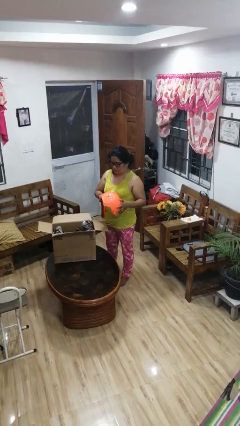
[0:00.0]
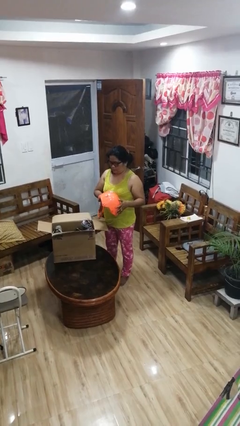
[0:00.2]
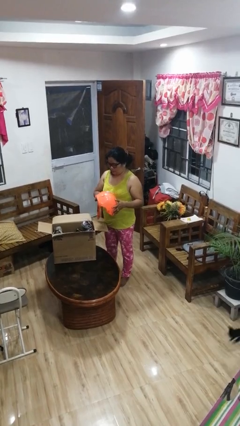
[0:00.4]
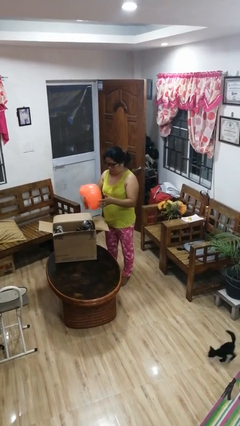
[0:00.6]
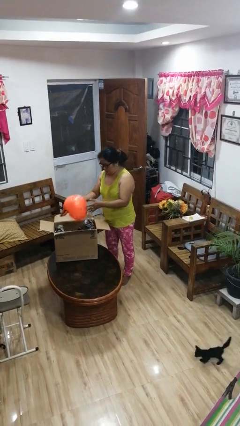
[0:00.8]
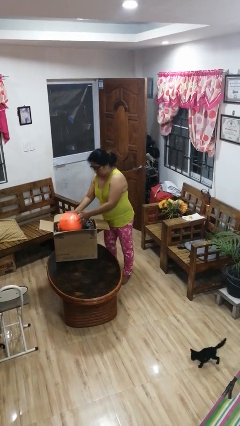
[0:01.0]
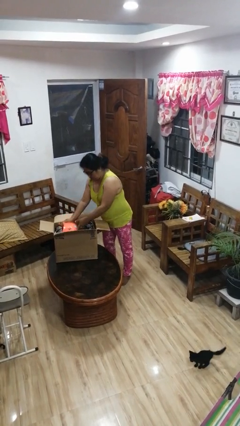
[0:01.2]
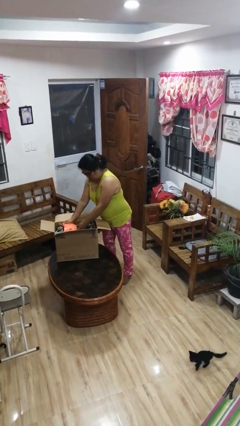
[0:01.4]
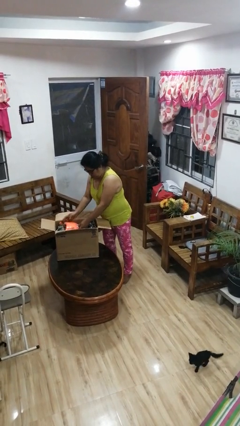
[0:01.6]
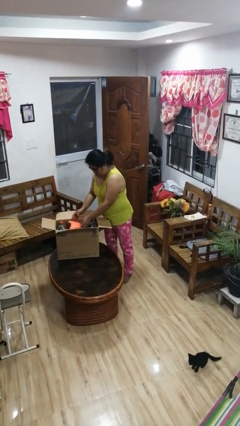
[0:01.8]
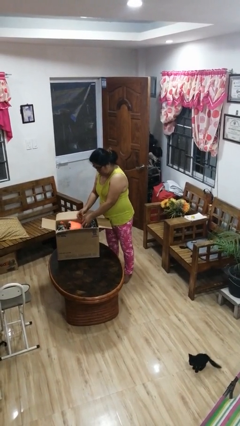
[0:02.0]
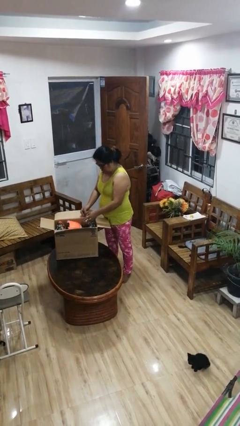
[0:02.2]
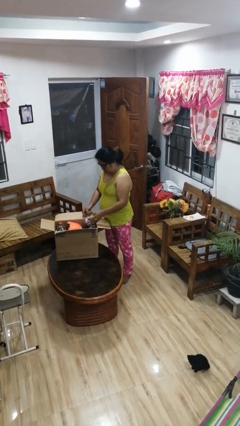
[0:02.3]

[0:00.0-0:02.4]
person puts object into box

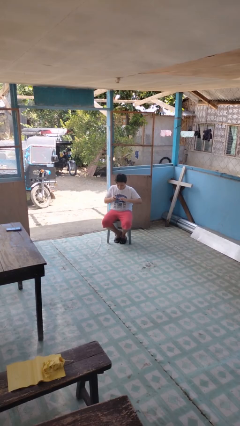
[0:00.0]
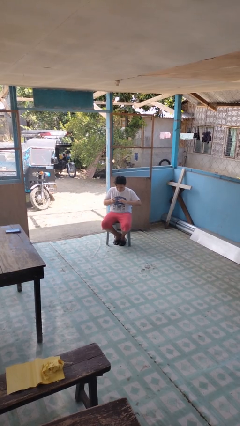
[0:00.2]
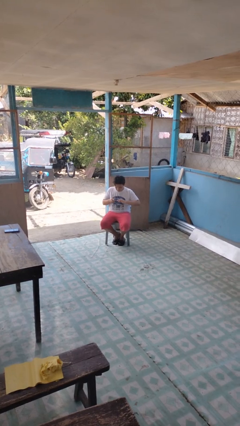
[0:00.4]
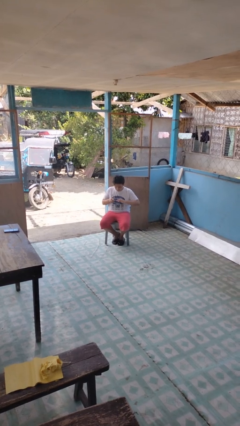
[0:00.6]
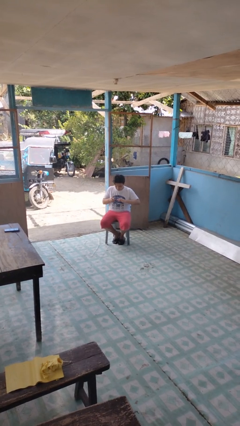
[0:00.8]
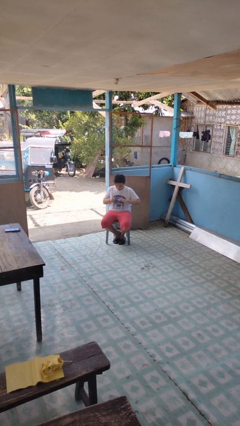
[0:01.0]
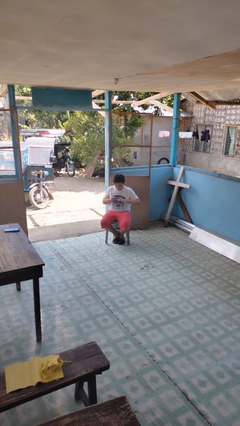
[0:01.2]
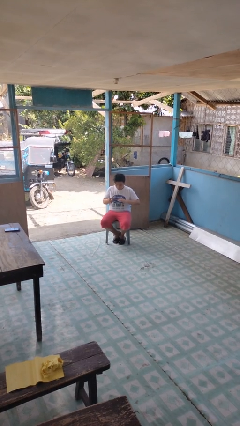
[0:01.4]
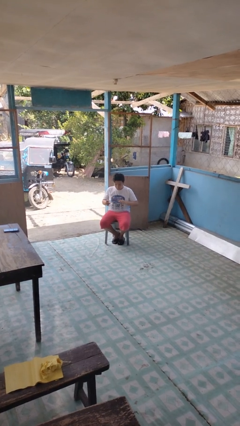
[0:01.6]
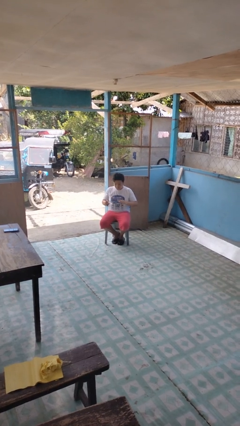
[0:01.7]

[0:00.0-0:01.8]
person clips fingernails

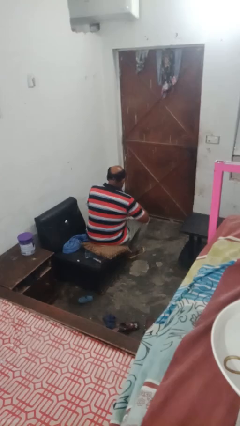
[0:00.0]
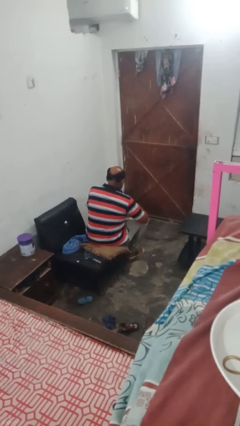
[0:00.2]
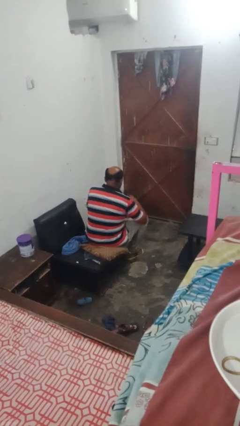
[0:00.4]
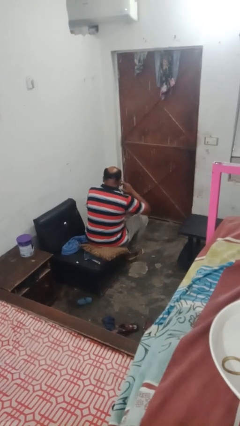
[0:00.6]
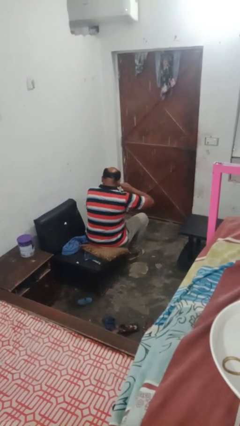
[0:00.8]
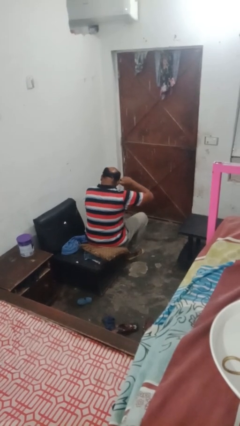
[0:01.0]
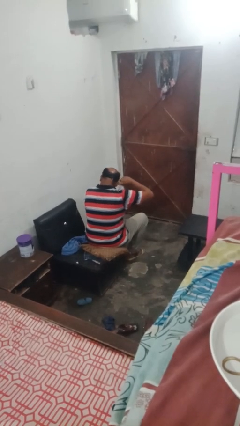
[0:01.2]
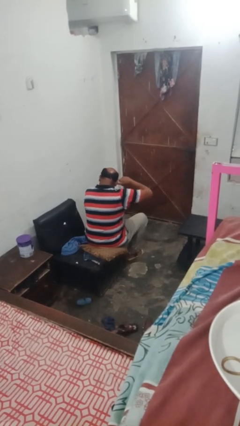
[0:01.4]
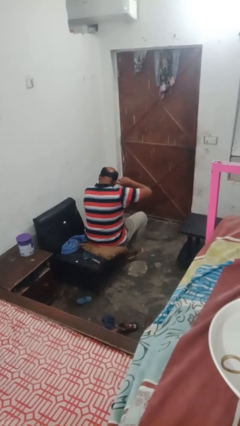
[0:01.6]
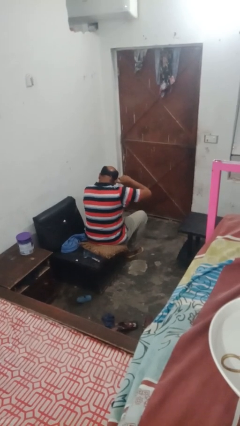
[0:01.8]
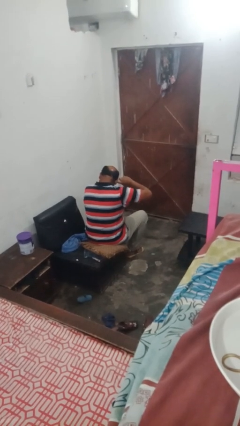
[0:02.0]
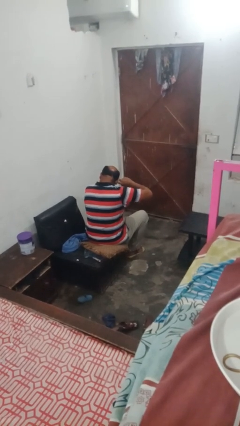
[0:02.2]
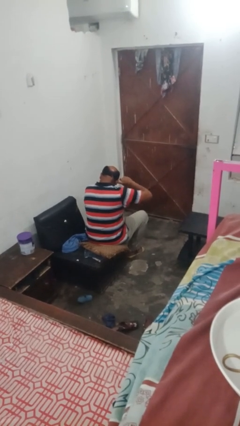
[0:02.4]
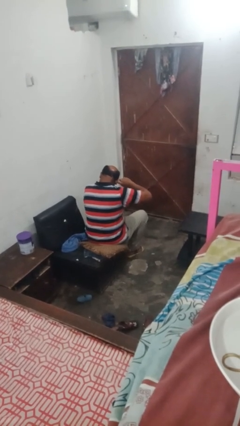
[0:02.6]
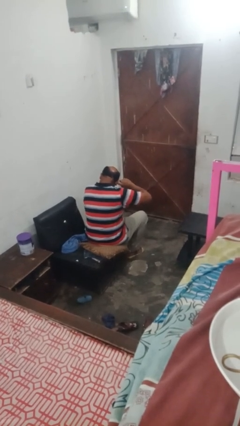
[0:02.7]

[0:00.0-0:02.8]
person puts fingers in ear

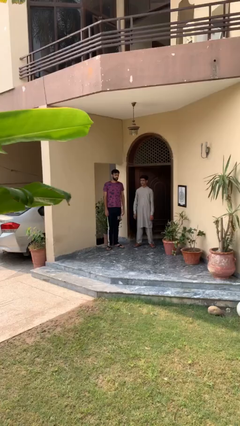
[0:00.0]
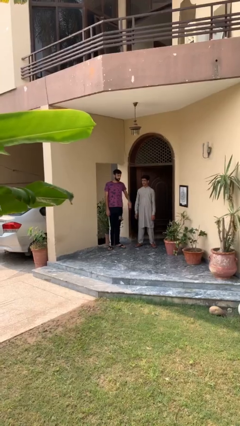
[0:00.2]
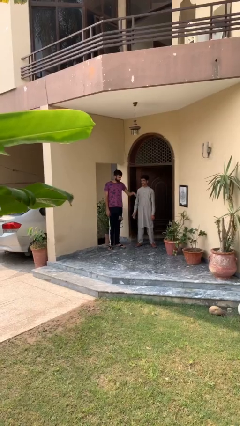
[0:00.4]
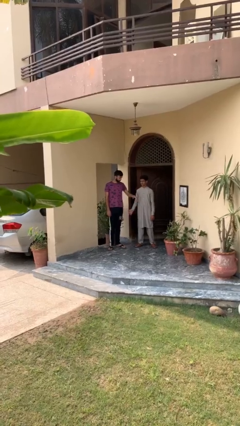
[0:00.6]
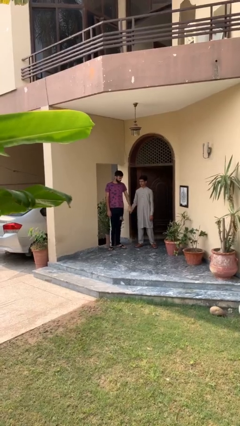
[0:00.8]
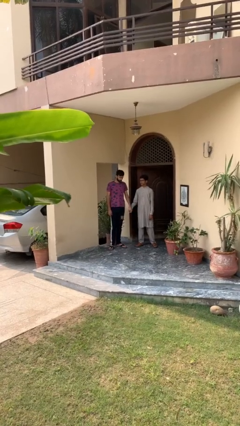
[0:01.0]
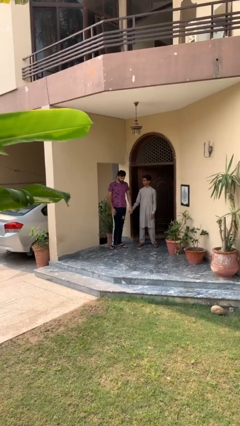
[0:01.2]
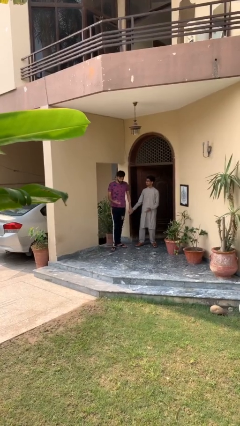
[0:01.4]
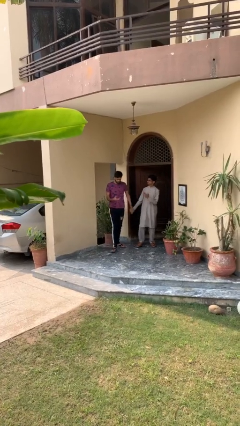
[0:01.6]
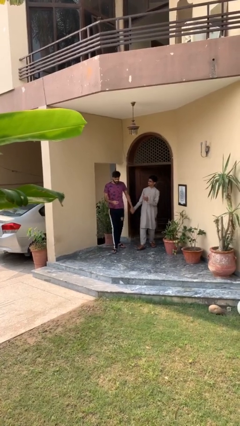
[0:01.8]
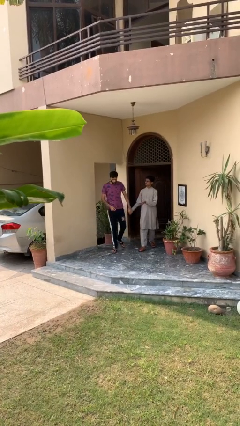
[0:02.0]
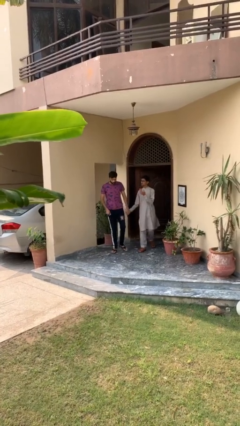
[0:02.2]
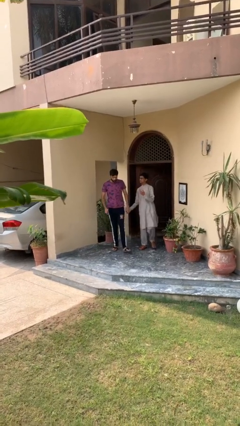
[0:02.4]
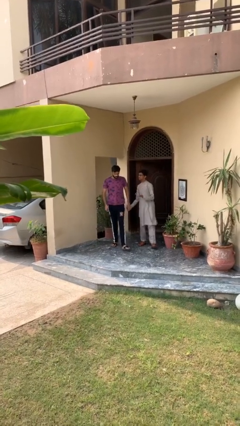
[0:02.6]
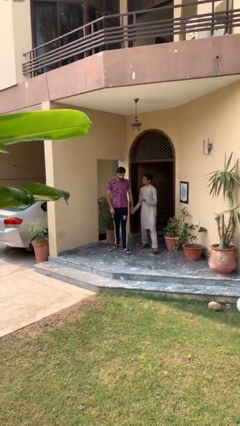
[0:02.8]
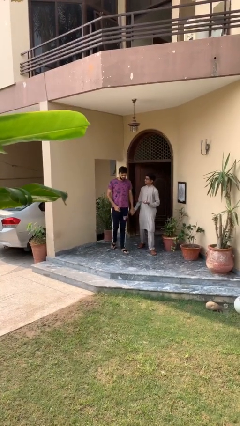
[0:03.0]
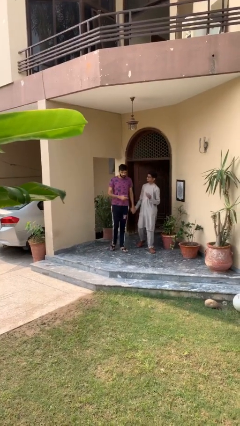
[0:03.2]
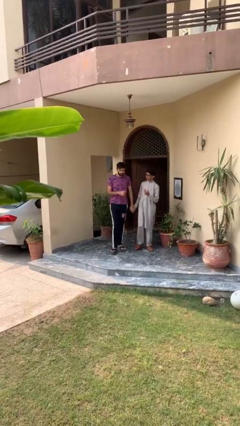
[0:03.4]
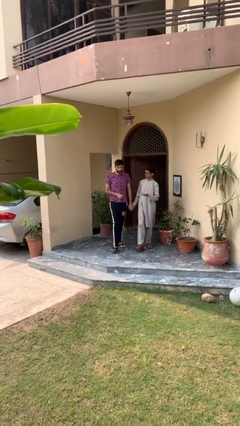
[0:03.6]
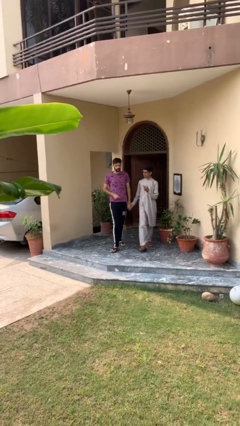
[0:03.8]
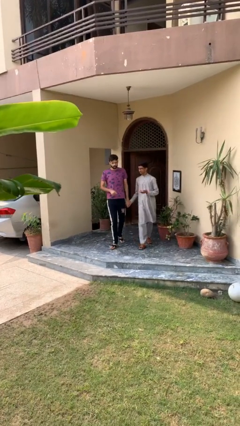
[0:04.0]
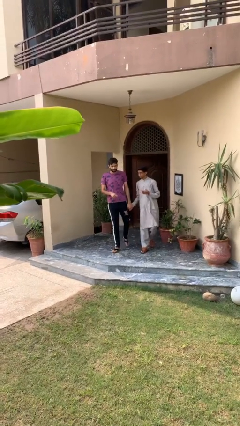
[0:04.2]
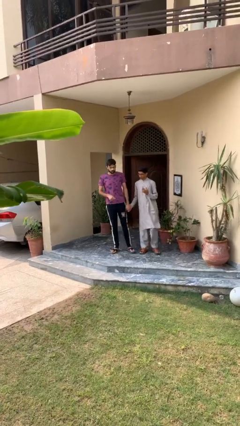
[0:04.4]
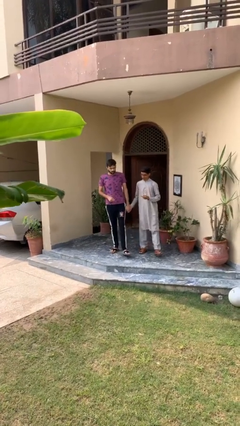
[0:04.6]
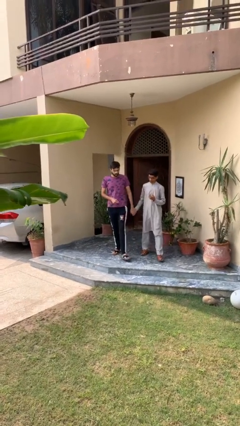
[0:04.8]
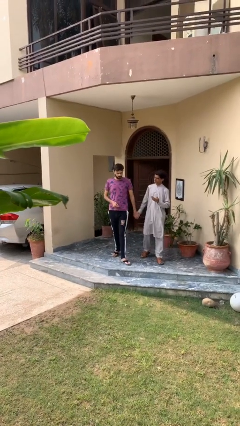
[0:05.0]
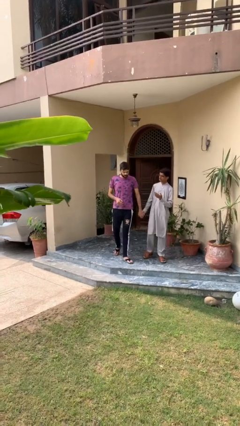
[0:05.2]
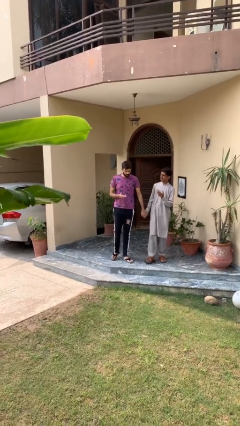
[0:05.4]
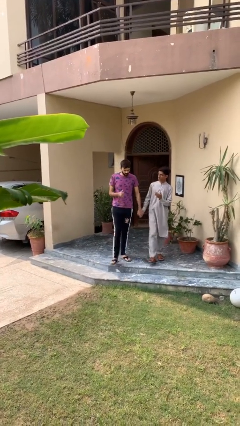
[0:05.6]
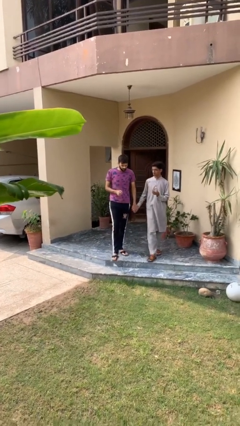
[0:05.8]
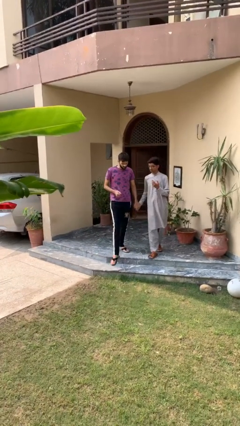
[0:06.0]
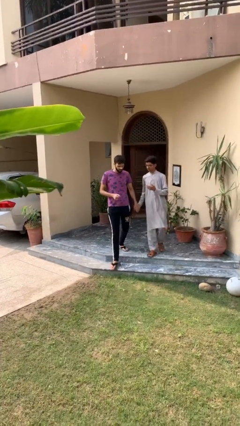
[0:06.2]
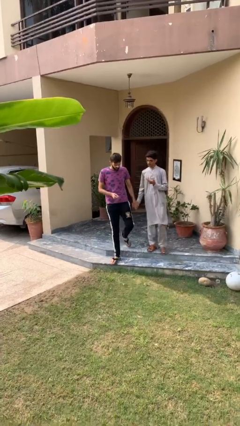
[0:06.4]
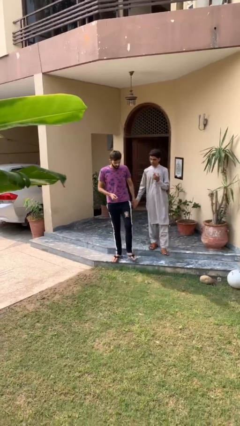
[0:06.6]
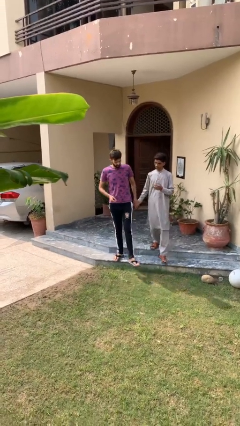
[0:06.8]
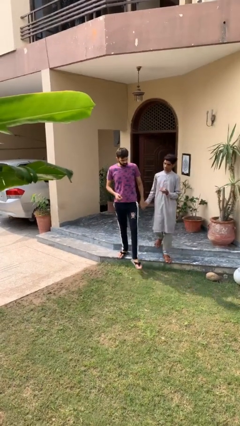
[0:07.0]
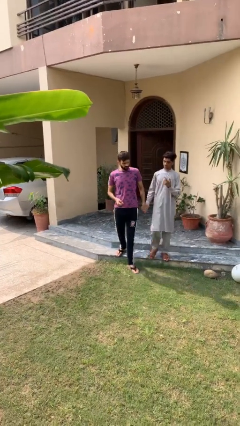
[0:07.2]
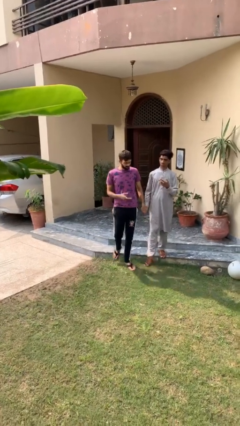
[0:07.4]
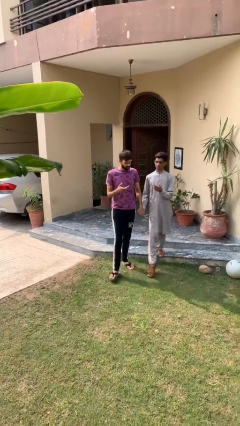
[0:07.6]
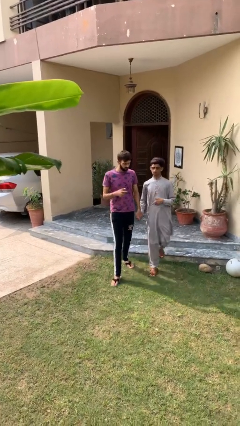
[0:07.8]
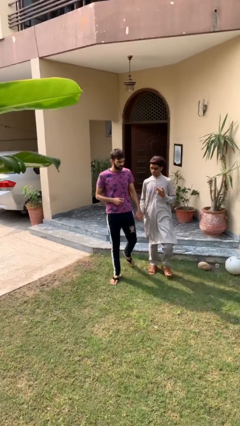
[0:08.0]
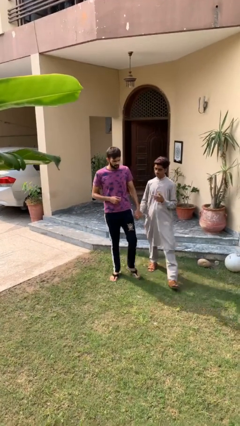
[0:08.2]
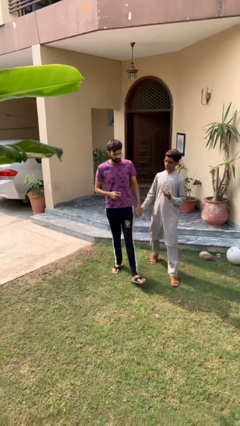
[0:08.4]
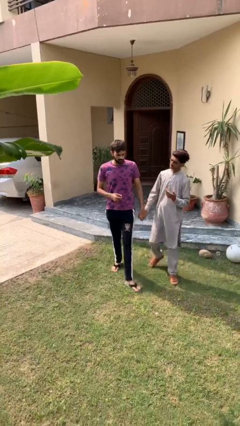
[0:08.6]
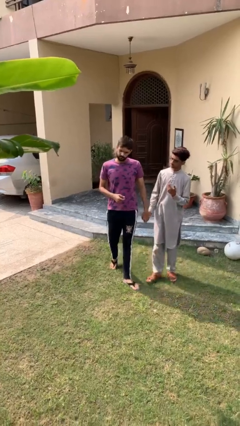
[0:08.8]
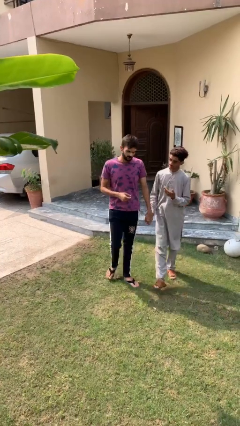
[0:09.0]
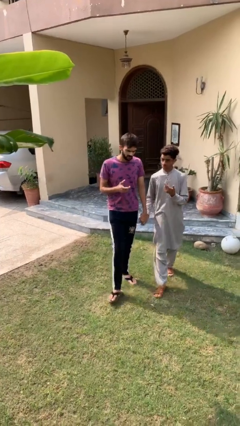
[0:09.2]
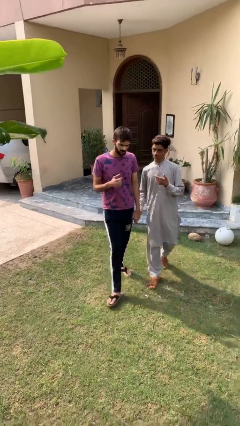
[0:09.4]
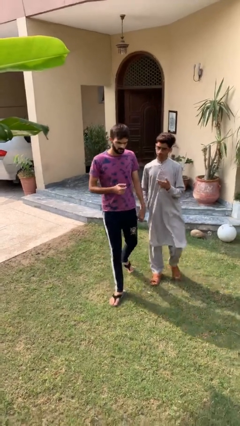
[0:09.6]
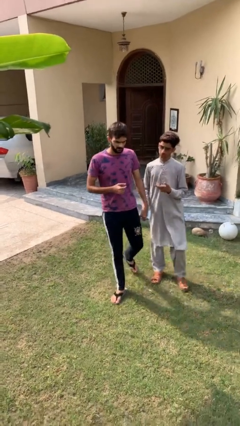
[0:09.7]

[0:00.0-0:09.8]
person holds hand

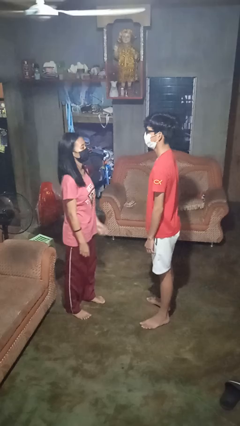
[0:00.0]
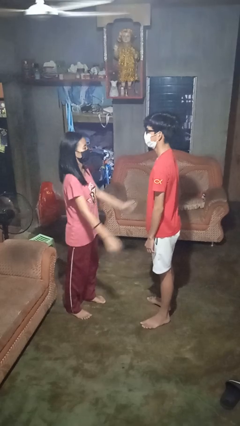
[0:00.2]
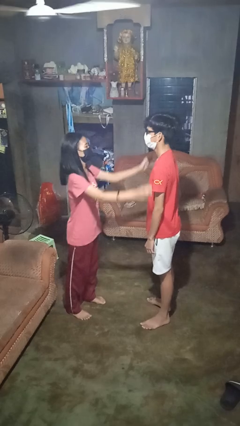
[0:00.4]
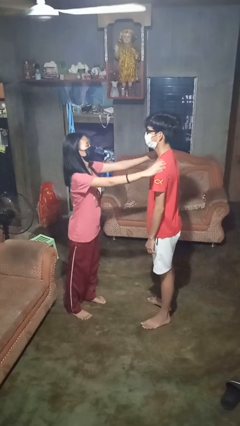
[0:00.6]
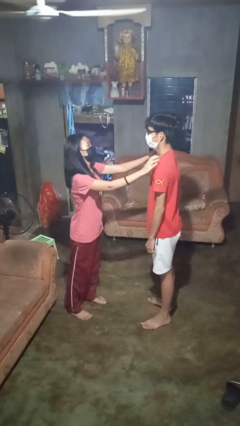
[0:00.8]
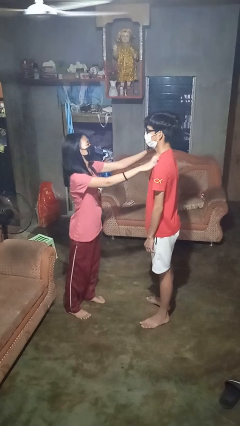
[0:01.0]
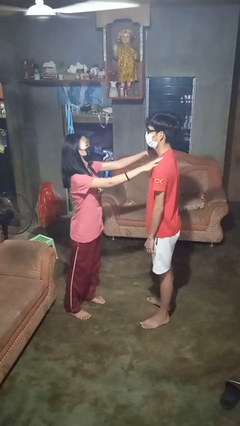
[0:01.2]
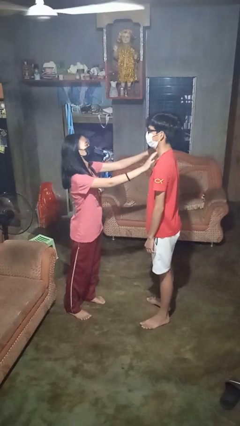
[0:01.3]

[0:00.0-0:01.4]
person pounds shoulders of person
